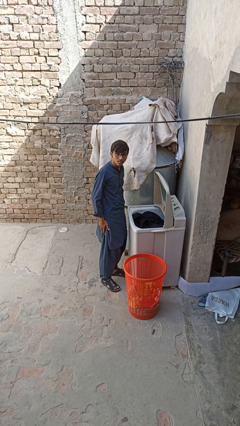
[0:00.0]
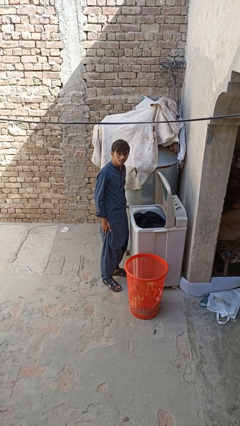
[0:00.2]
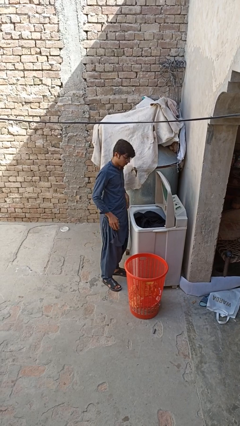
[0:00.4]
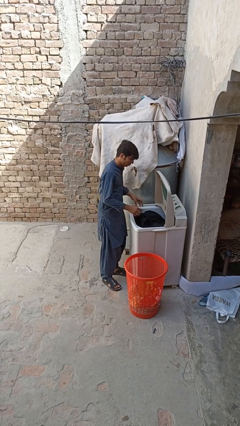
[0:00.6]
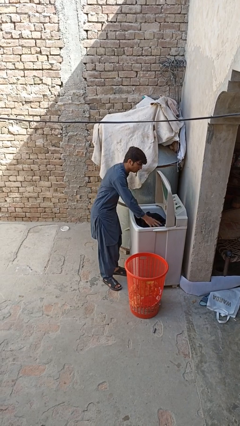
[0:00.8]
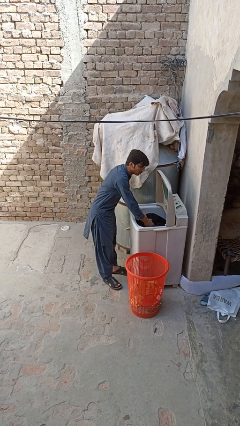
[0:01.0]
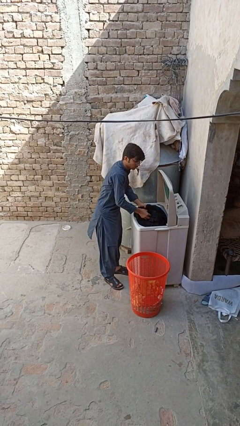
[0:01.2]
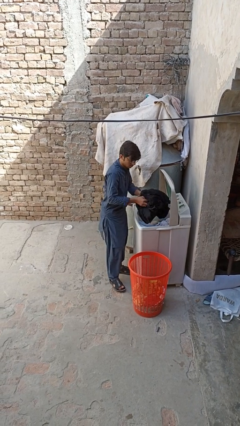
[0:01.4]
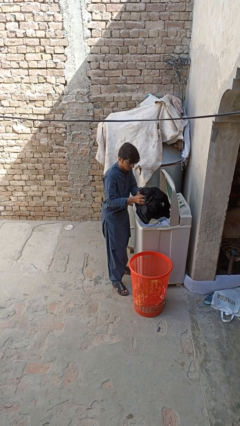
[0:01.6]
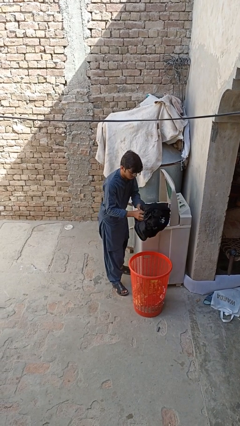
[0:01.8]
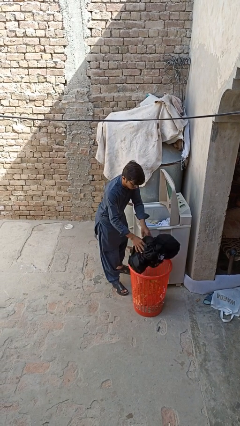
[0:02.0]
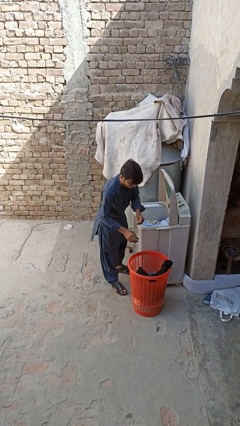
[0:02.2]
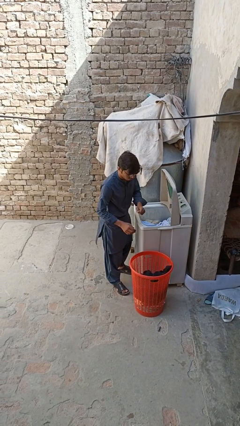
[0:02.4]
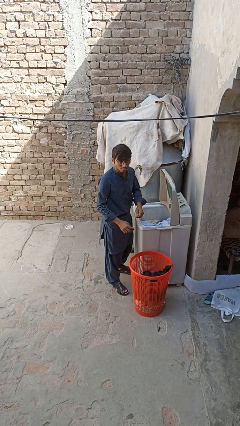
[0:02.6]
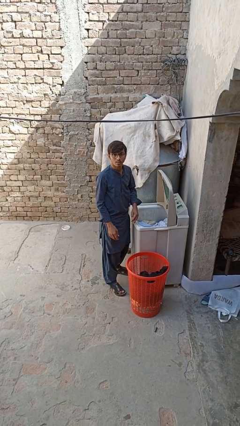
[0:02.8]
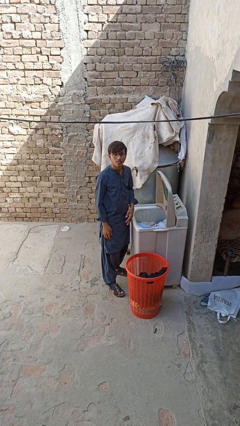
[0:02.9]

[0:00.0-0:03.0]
person unloads clotheswasher

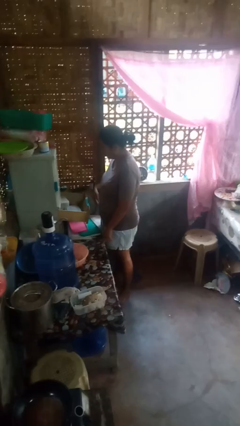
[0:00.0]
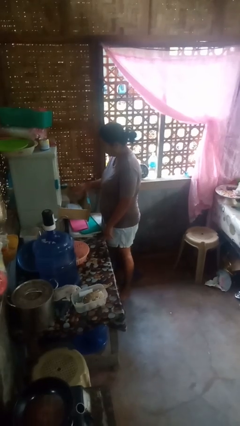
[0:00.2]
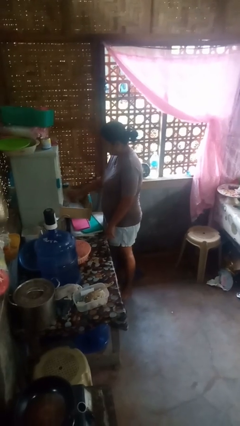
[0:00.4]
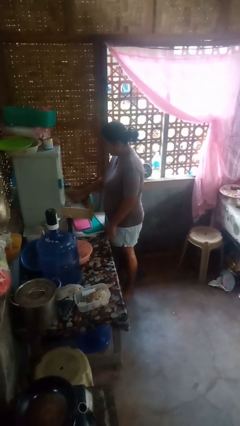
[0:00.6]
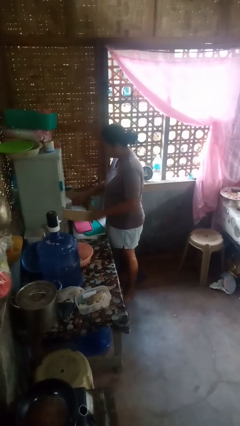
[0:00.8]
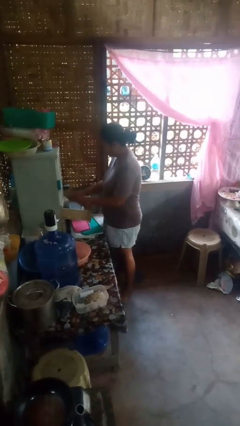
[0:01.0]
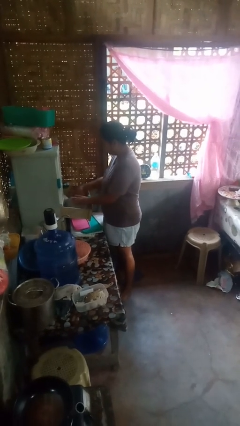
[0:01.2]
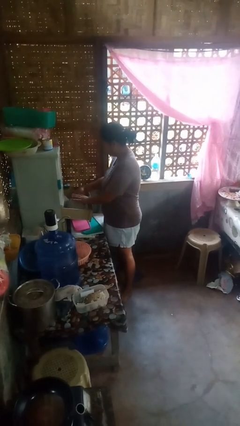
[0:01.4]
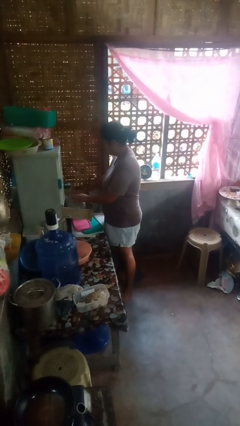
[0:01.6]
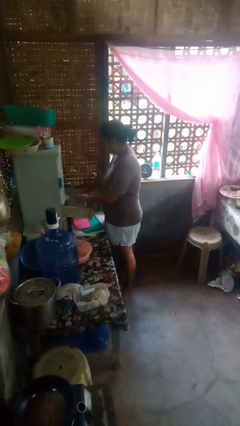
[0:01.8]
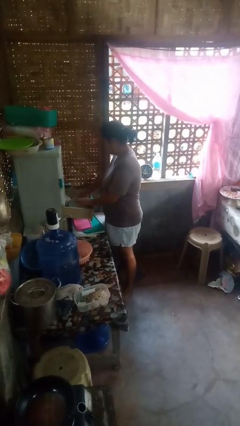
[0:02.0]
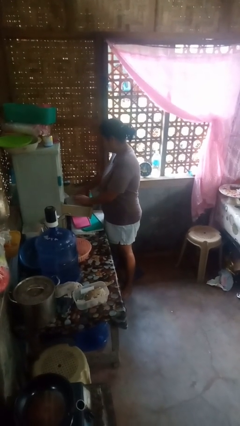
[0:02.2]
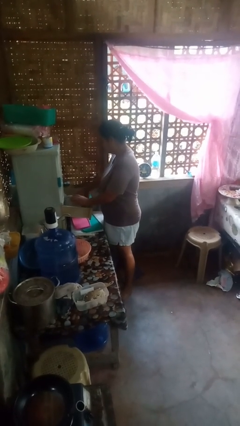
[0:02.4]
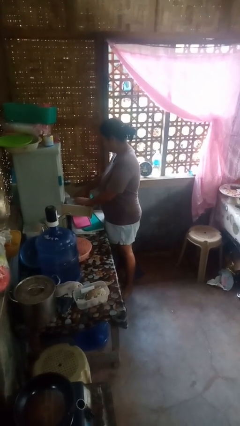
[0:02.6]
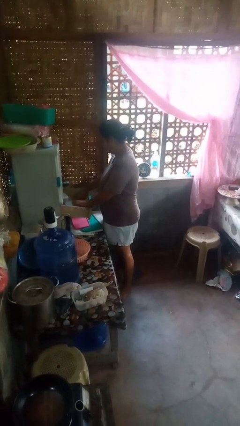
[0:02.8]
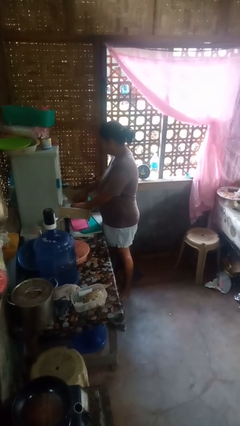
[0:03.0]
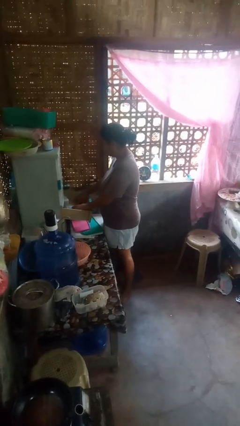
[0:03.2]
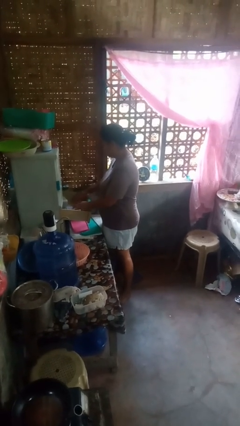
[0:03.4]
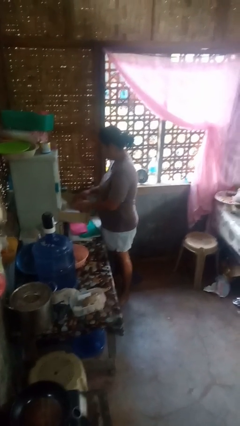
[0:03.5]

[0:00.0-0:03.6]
person searches in kitchen drawer

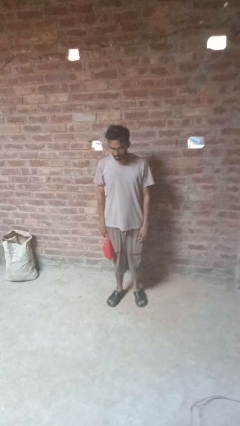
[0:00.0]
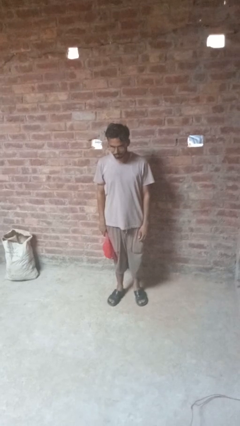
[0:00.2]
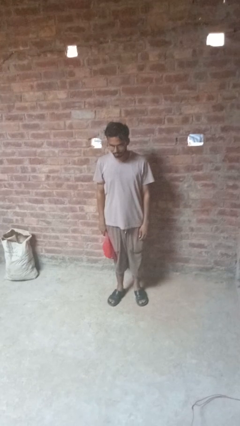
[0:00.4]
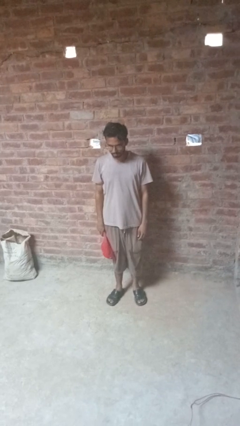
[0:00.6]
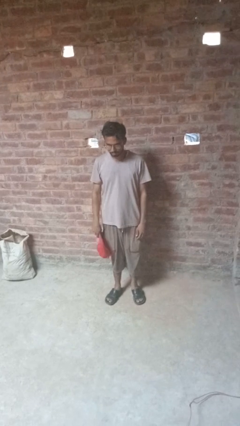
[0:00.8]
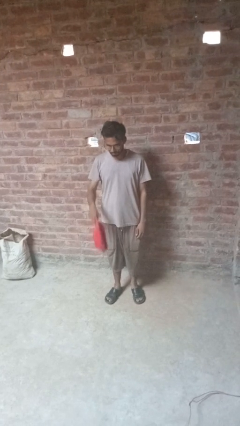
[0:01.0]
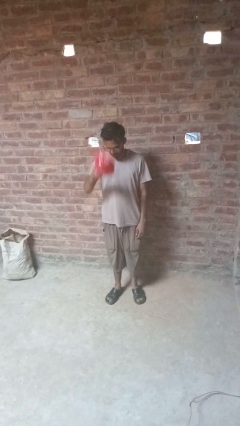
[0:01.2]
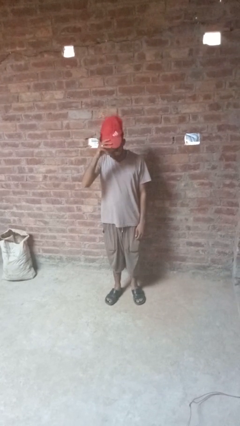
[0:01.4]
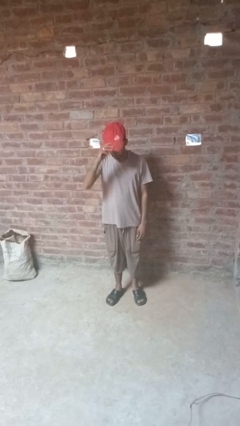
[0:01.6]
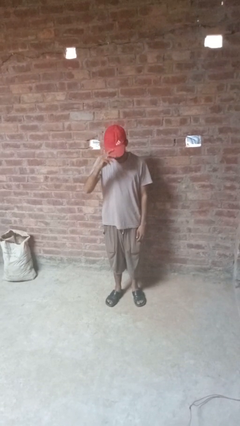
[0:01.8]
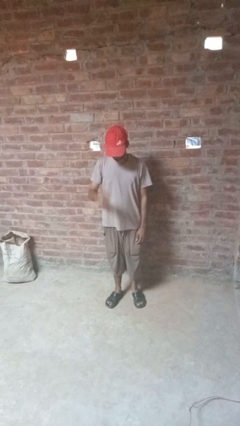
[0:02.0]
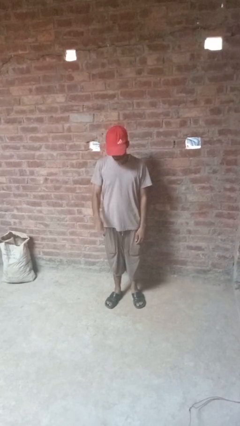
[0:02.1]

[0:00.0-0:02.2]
person puts on hat

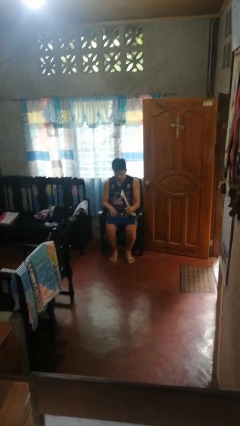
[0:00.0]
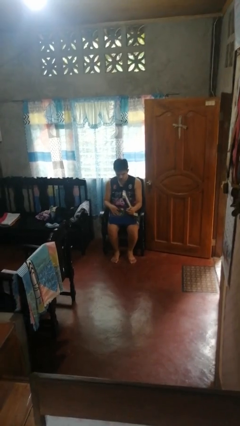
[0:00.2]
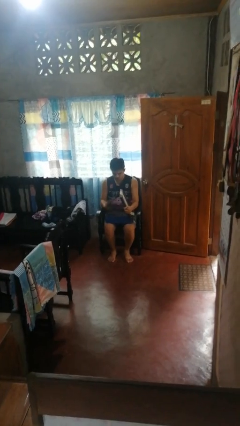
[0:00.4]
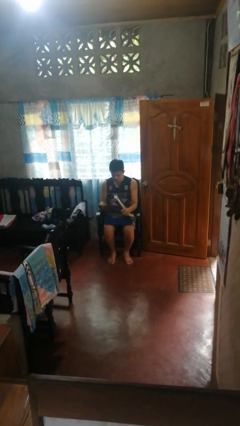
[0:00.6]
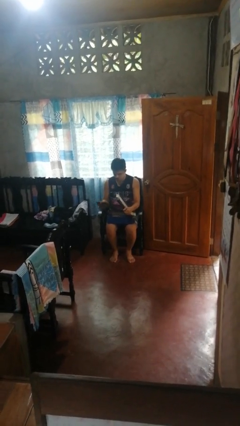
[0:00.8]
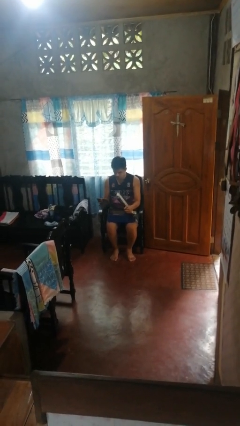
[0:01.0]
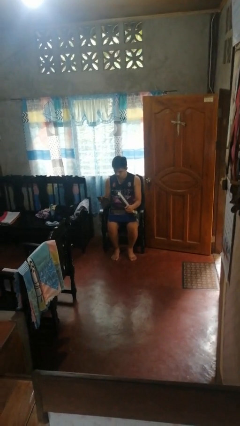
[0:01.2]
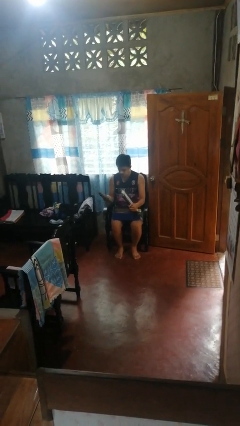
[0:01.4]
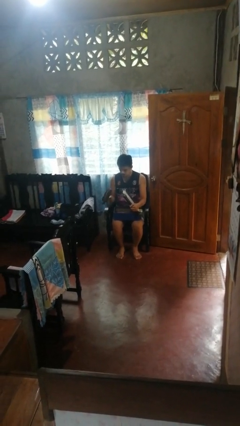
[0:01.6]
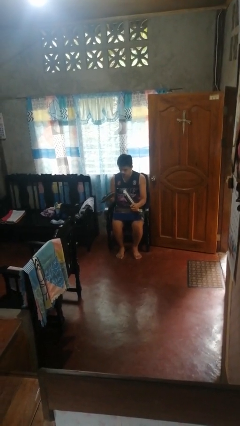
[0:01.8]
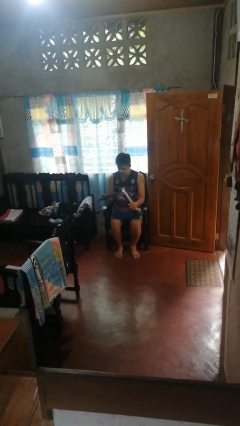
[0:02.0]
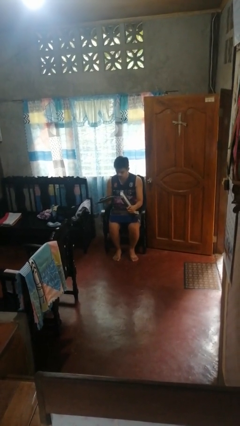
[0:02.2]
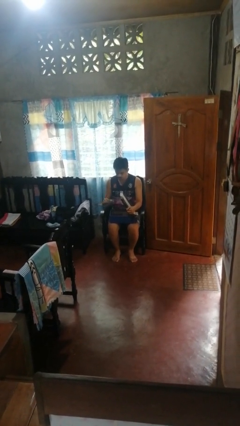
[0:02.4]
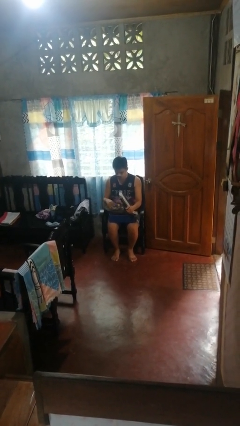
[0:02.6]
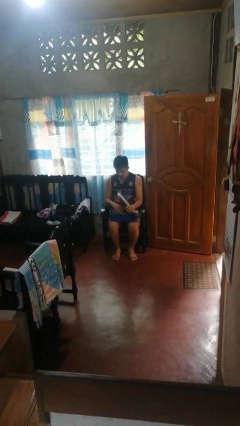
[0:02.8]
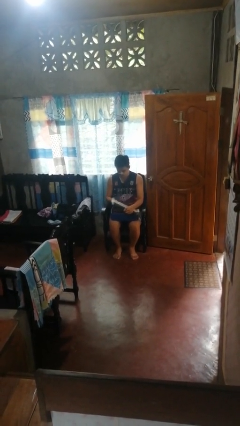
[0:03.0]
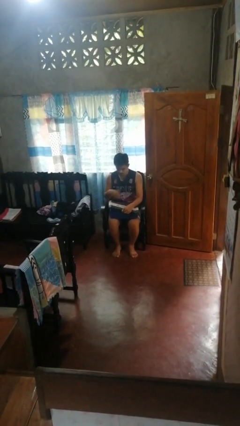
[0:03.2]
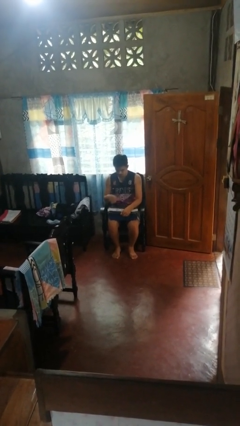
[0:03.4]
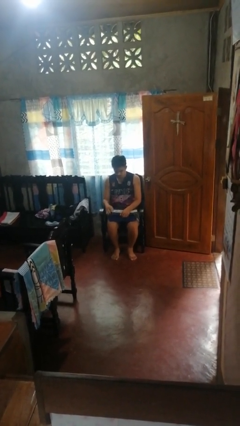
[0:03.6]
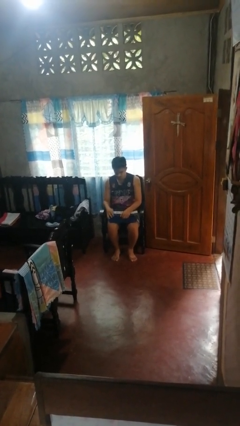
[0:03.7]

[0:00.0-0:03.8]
person takes object from box

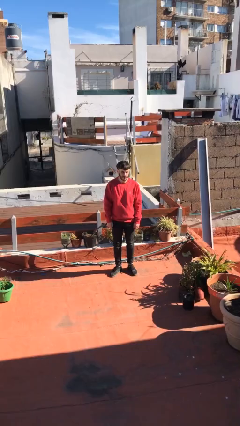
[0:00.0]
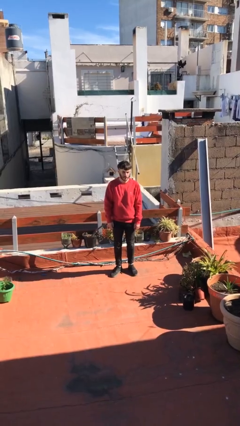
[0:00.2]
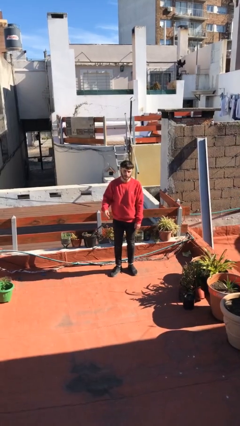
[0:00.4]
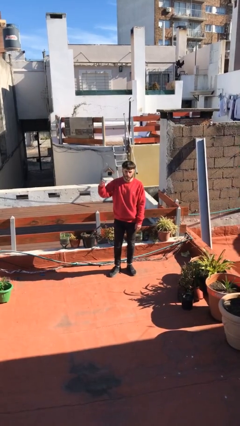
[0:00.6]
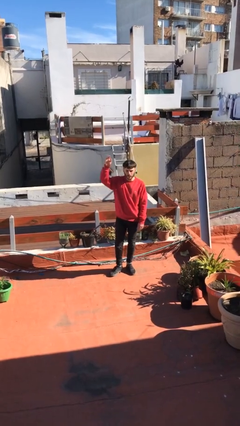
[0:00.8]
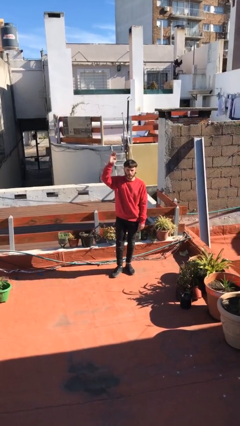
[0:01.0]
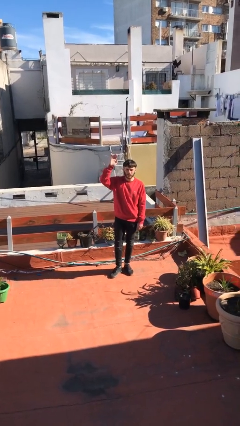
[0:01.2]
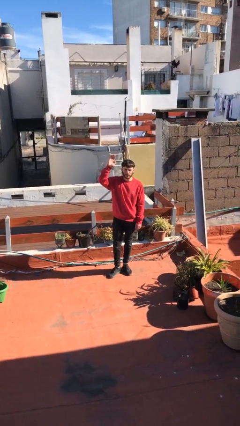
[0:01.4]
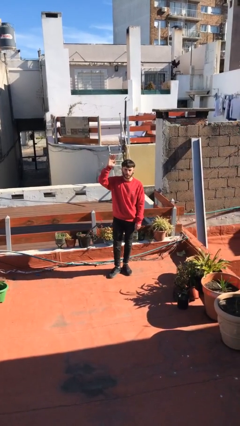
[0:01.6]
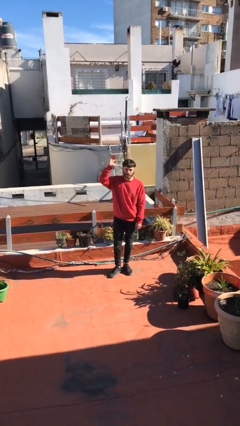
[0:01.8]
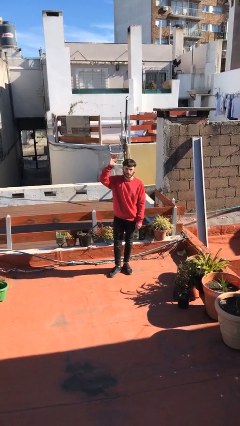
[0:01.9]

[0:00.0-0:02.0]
person gestures raise hand

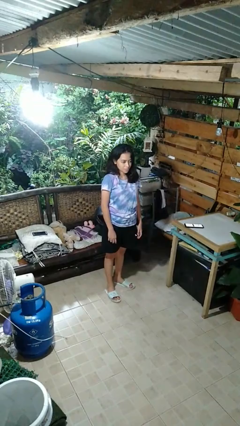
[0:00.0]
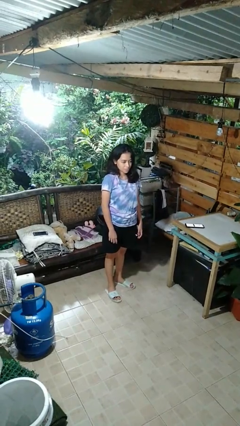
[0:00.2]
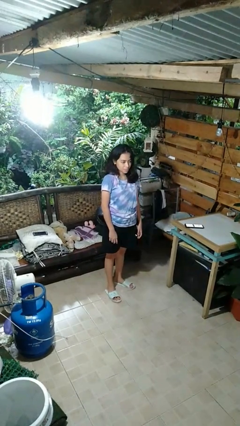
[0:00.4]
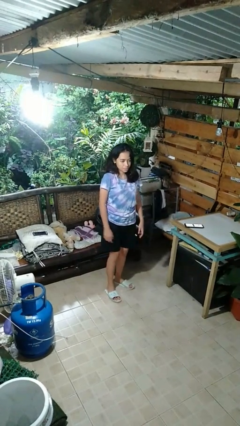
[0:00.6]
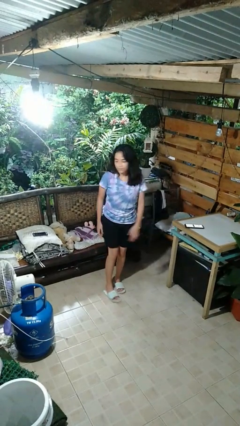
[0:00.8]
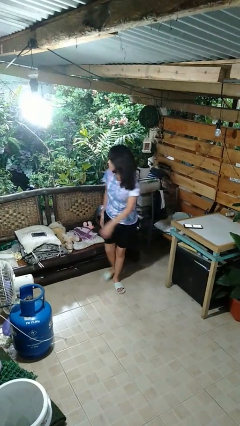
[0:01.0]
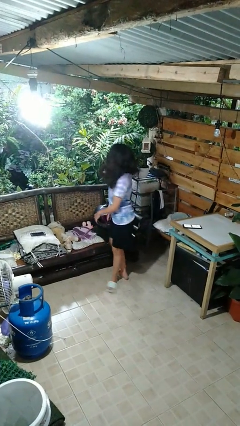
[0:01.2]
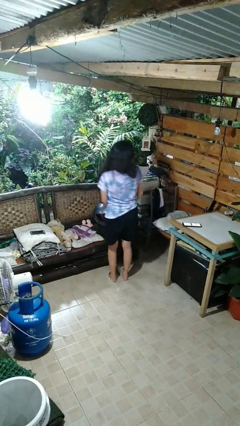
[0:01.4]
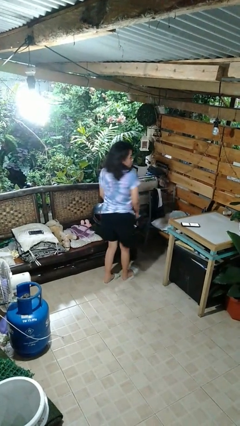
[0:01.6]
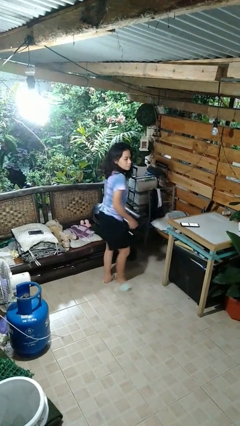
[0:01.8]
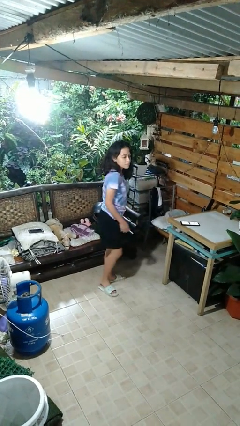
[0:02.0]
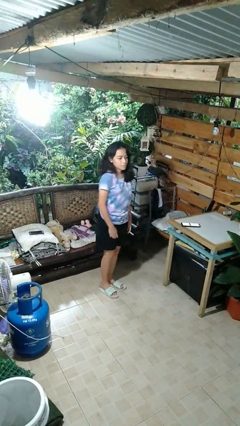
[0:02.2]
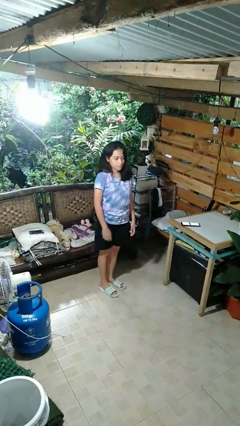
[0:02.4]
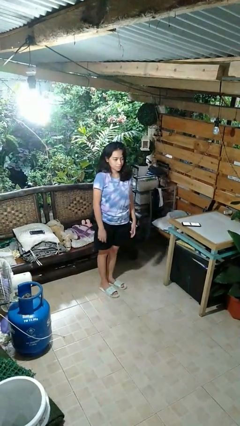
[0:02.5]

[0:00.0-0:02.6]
person twirls

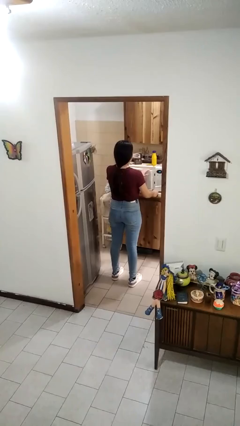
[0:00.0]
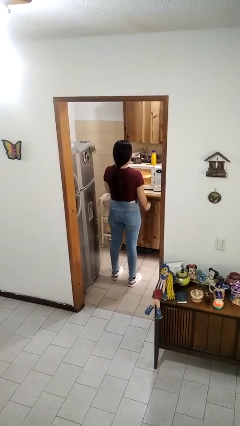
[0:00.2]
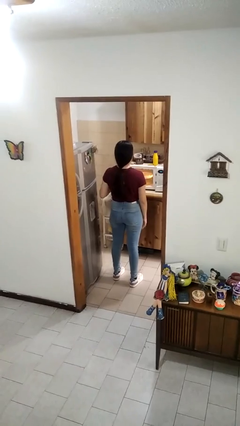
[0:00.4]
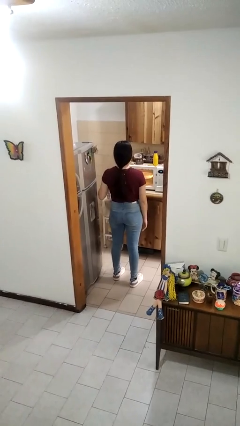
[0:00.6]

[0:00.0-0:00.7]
person opens microwave
